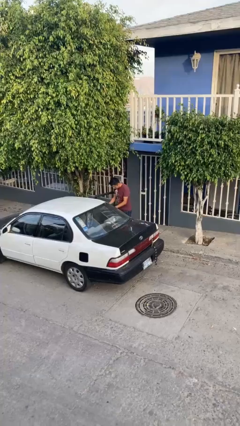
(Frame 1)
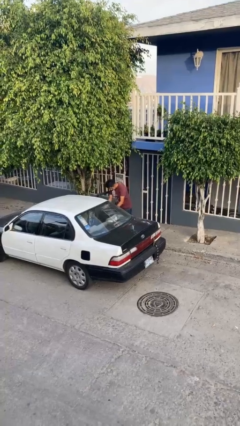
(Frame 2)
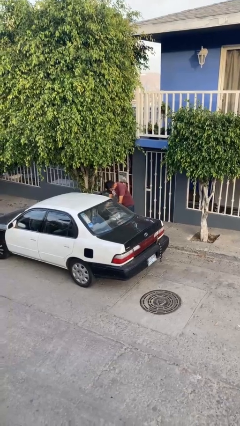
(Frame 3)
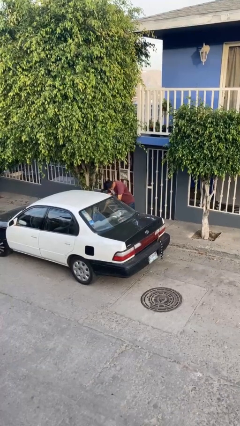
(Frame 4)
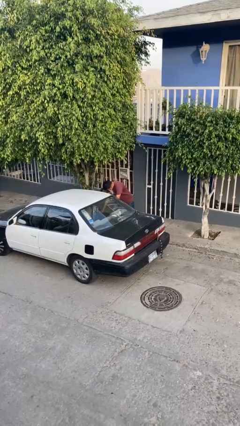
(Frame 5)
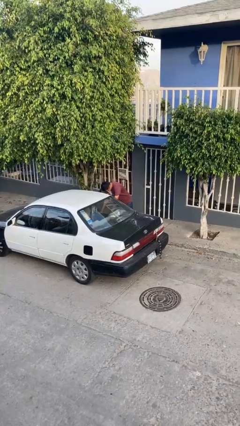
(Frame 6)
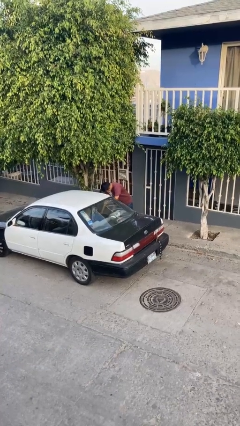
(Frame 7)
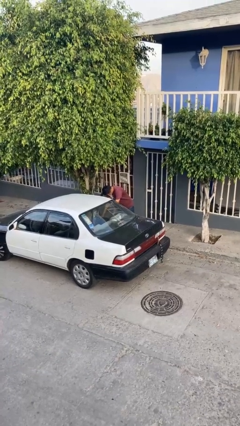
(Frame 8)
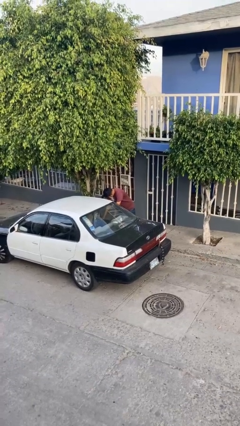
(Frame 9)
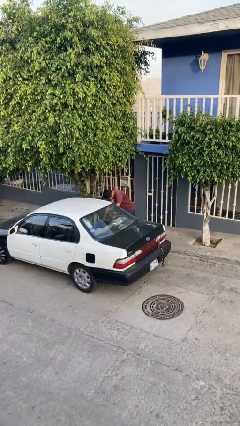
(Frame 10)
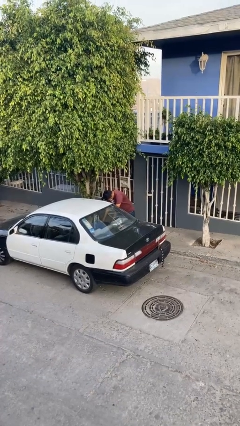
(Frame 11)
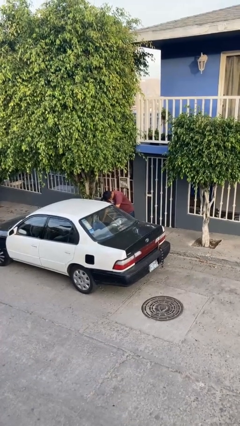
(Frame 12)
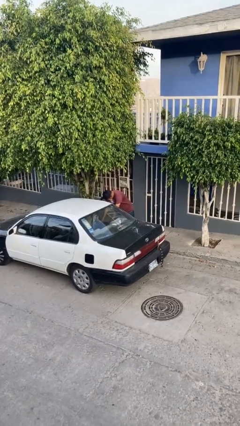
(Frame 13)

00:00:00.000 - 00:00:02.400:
person loads car

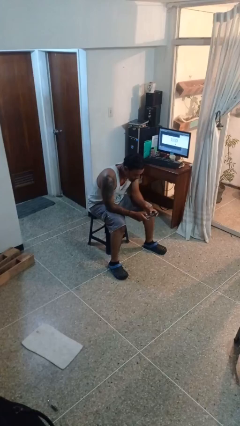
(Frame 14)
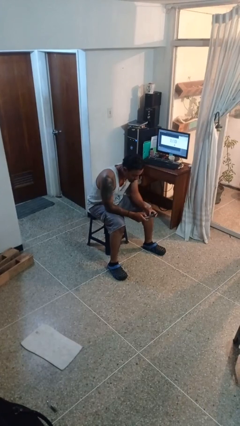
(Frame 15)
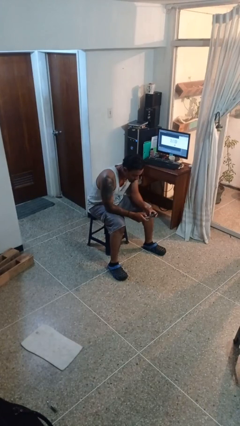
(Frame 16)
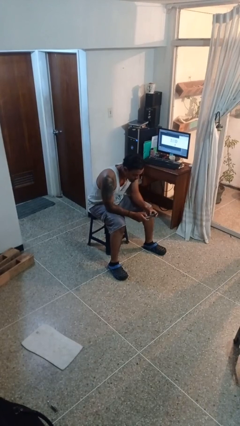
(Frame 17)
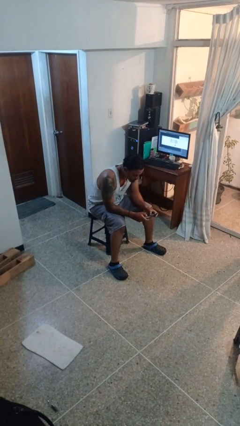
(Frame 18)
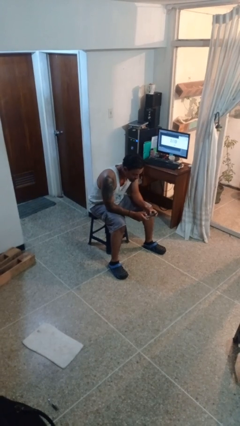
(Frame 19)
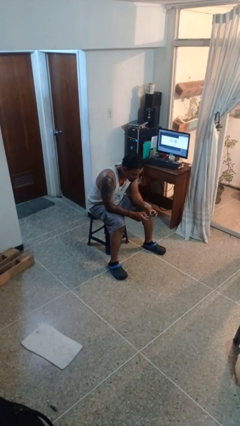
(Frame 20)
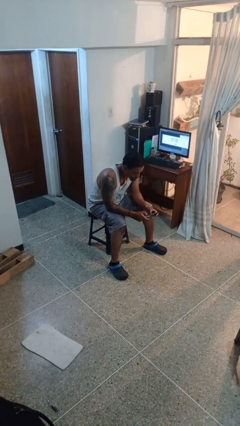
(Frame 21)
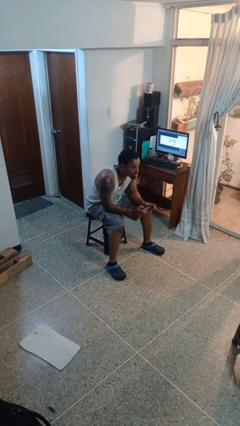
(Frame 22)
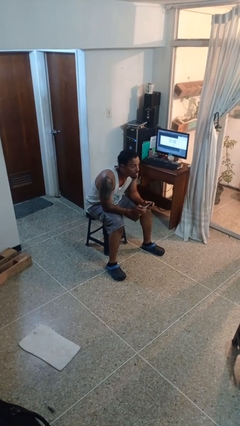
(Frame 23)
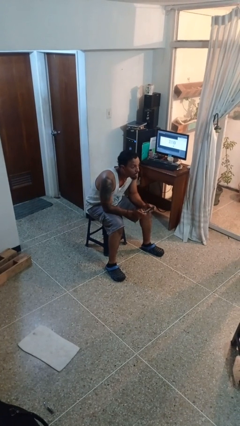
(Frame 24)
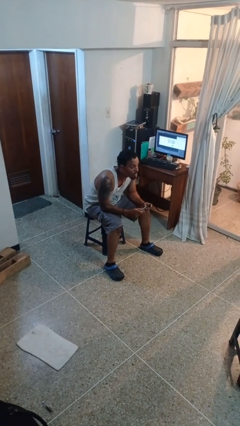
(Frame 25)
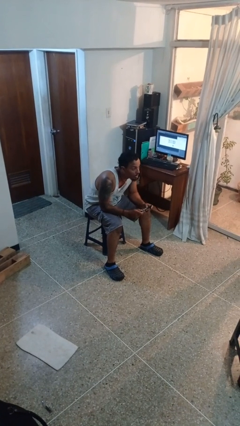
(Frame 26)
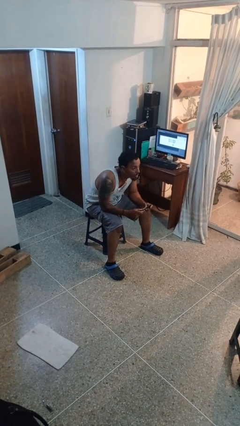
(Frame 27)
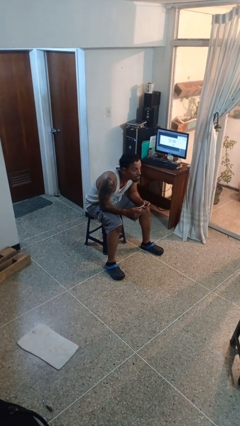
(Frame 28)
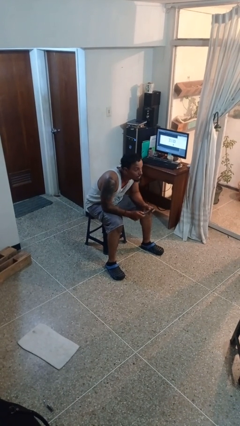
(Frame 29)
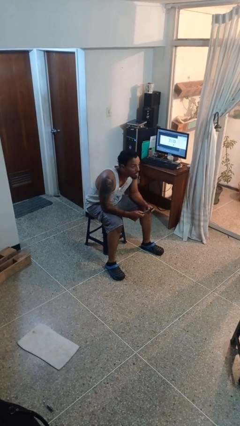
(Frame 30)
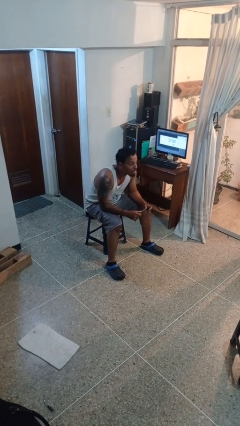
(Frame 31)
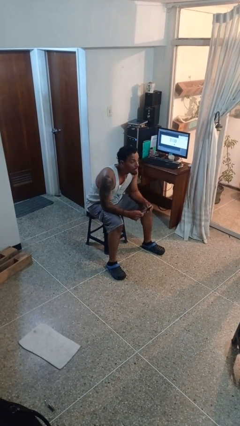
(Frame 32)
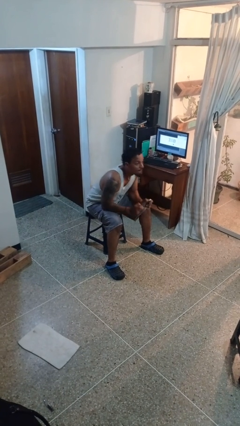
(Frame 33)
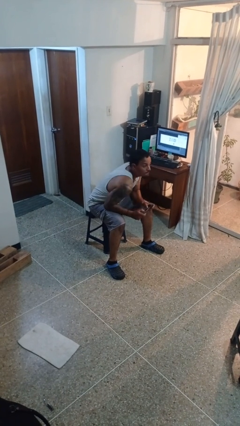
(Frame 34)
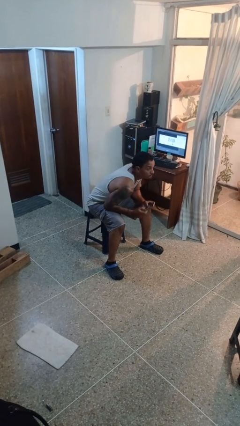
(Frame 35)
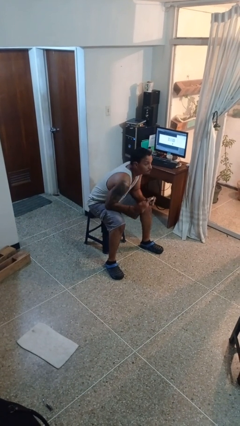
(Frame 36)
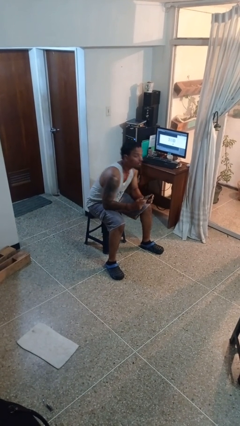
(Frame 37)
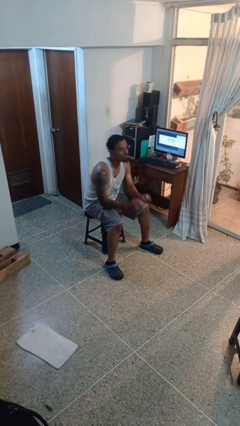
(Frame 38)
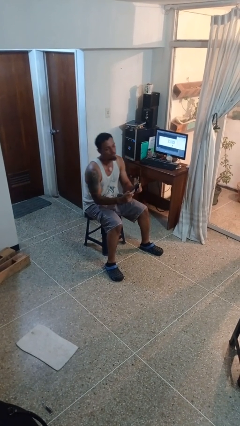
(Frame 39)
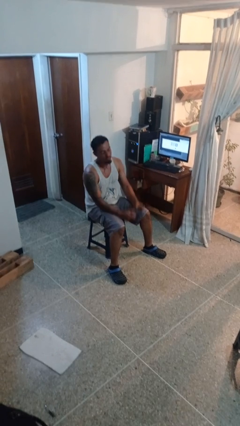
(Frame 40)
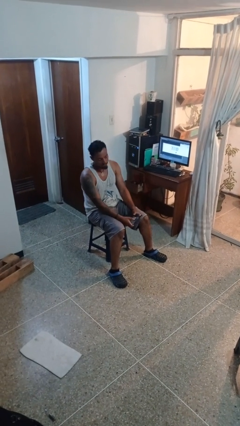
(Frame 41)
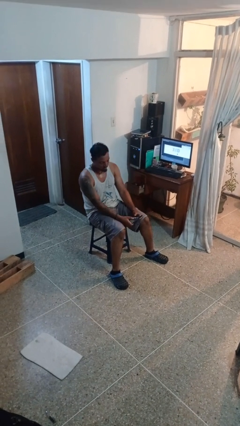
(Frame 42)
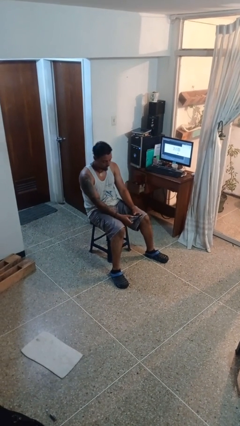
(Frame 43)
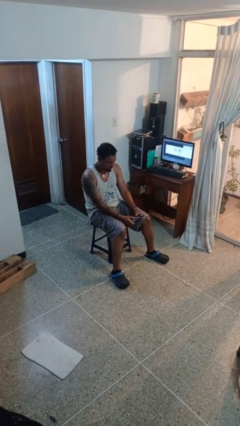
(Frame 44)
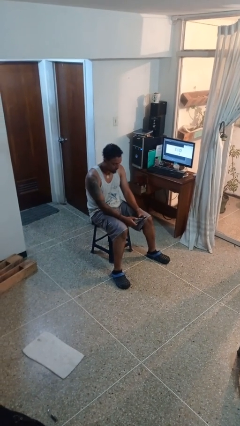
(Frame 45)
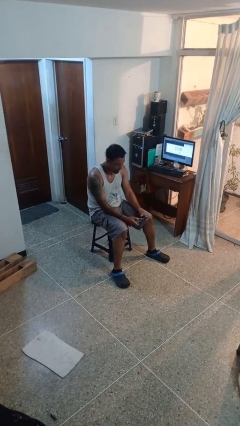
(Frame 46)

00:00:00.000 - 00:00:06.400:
person interacts with handheld game

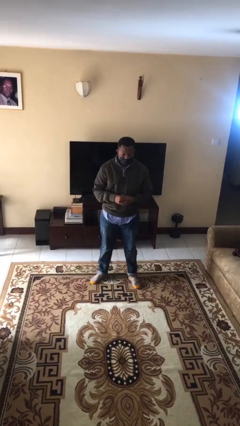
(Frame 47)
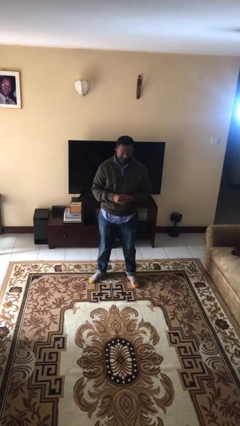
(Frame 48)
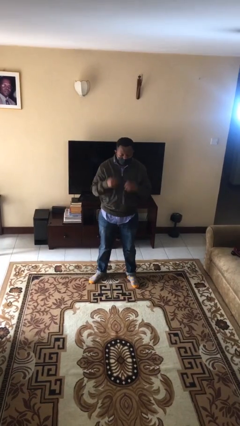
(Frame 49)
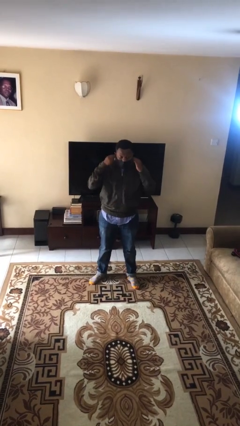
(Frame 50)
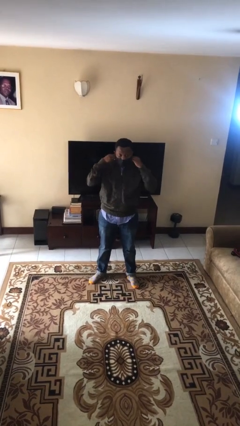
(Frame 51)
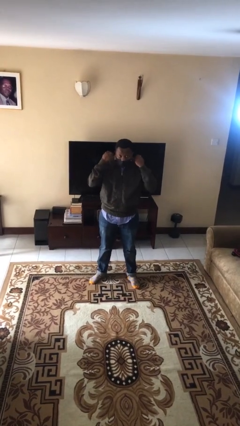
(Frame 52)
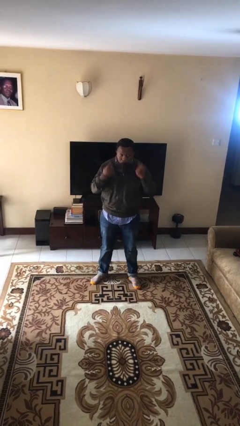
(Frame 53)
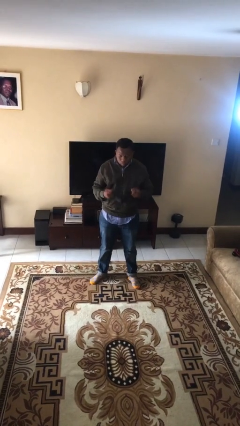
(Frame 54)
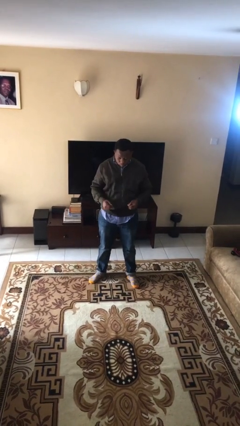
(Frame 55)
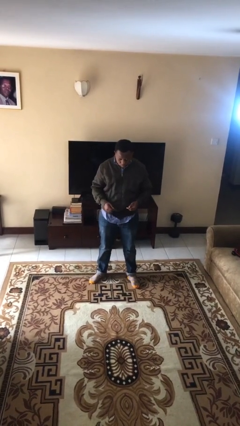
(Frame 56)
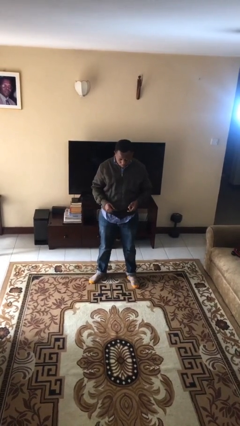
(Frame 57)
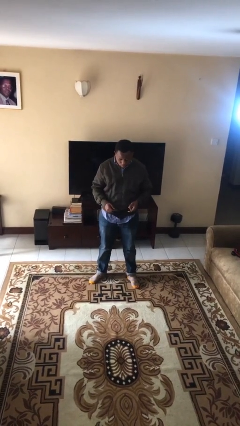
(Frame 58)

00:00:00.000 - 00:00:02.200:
person takes off facemask

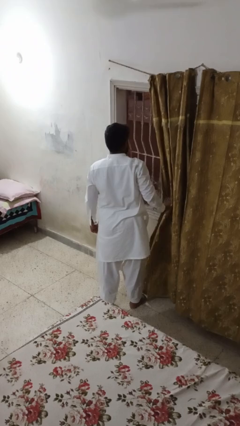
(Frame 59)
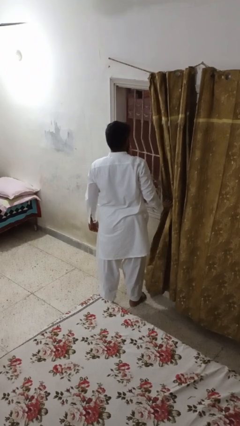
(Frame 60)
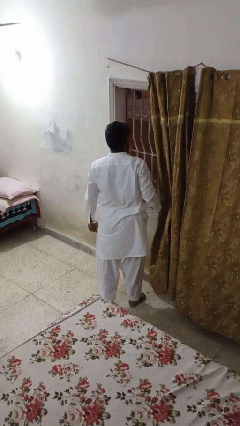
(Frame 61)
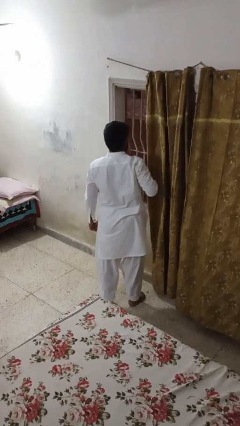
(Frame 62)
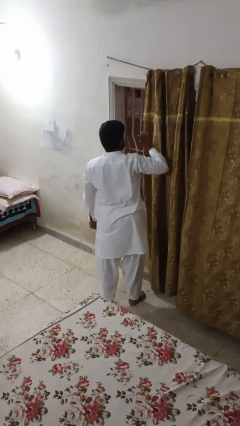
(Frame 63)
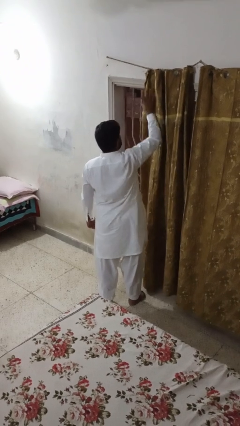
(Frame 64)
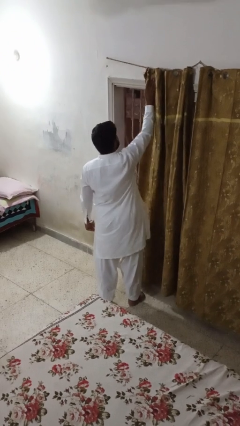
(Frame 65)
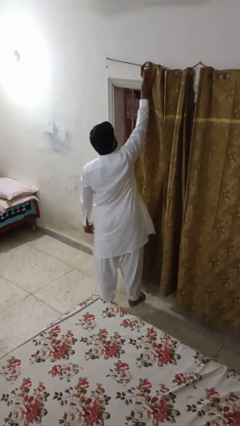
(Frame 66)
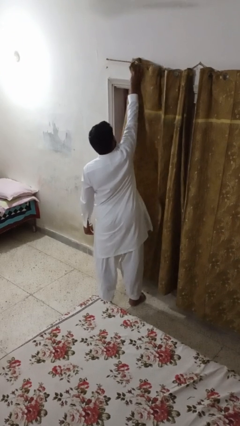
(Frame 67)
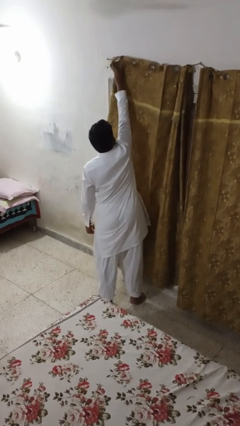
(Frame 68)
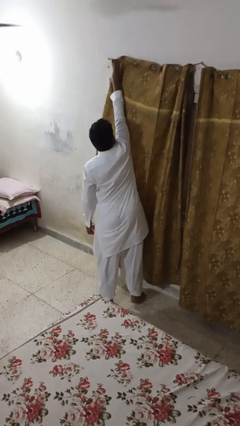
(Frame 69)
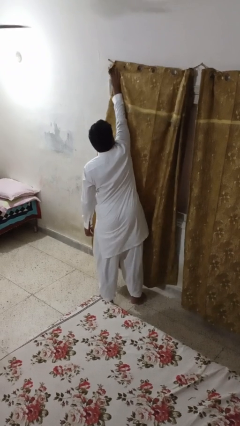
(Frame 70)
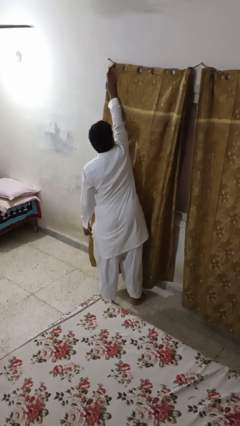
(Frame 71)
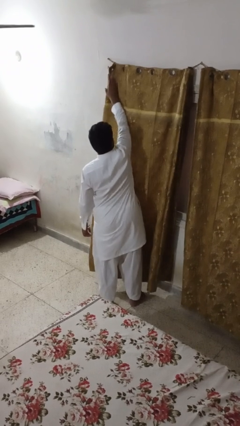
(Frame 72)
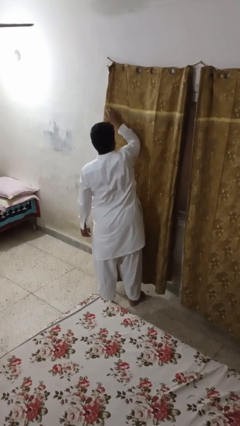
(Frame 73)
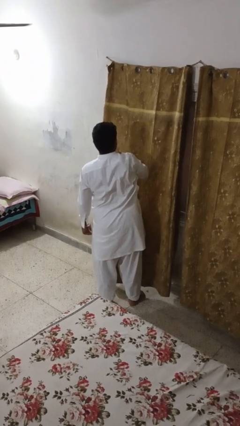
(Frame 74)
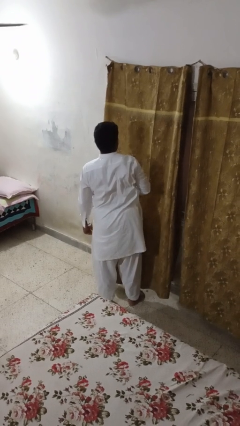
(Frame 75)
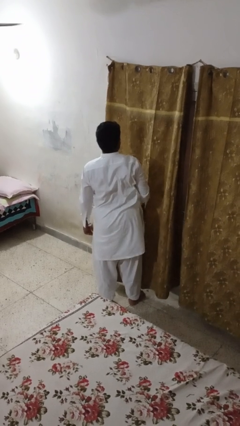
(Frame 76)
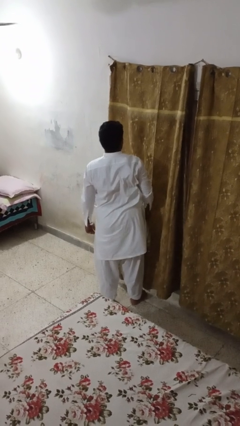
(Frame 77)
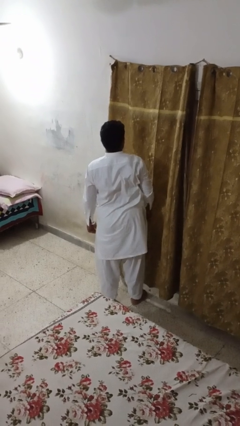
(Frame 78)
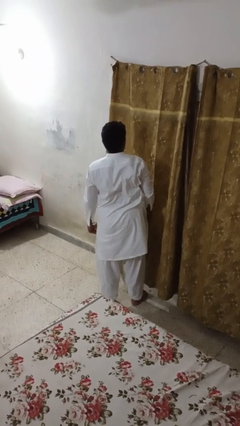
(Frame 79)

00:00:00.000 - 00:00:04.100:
person closes curtains

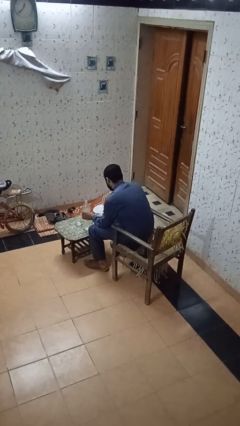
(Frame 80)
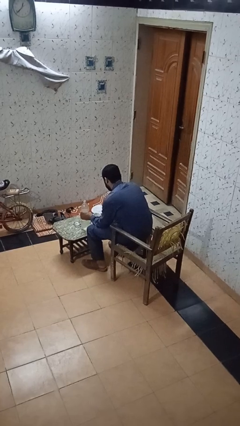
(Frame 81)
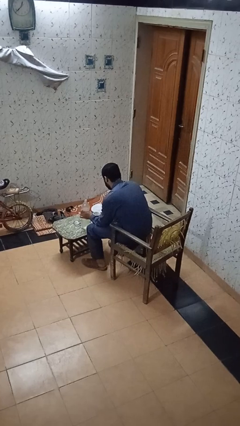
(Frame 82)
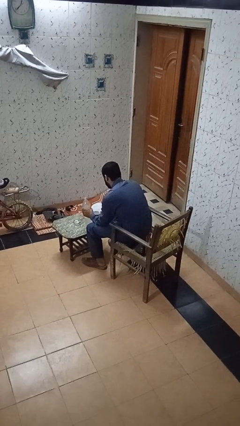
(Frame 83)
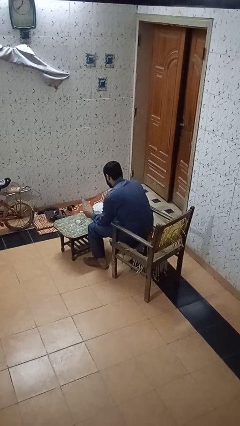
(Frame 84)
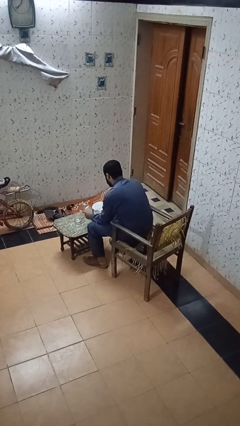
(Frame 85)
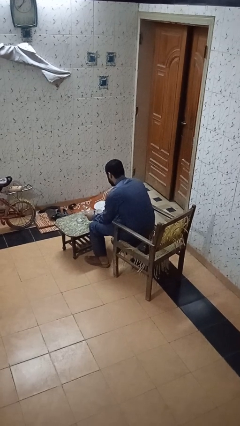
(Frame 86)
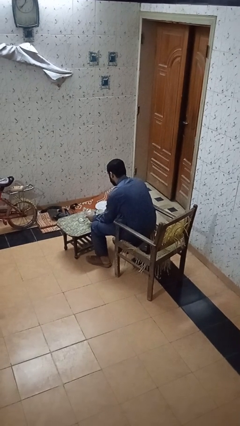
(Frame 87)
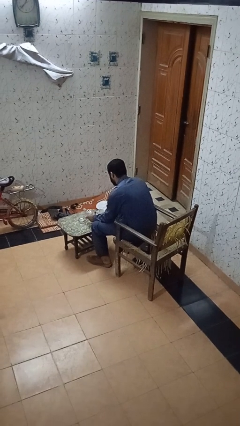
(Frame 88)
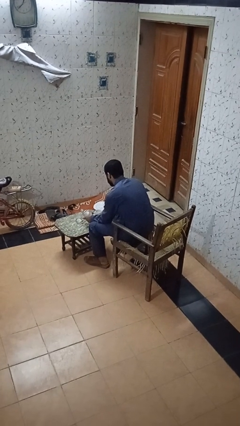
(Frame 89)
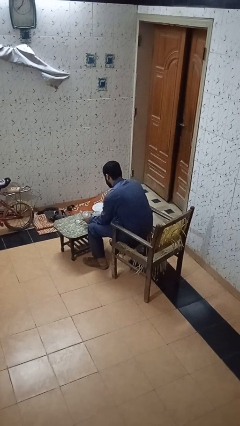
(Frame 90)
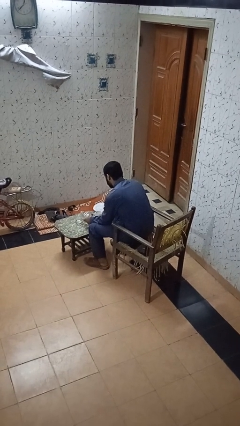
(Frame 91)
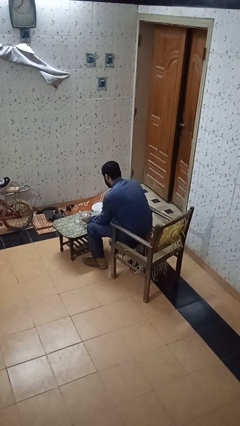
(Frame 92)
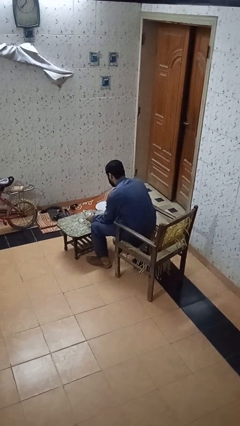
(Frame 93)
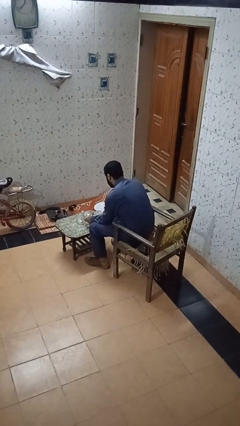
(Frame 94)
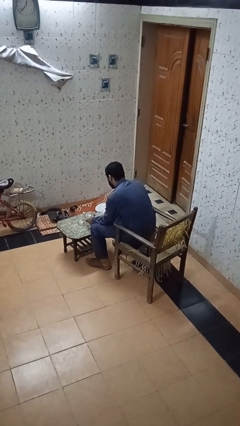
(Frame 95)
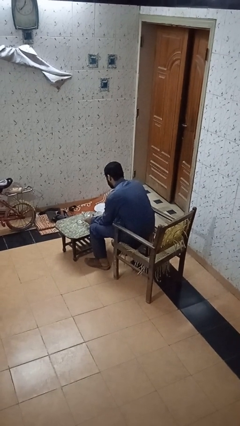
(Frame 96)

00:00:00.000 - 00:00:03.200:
person pours liquid into cup
